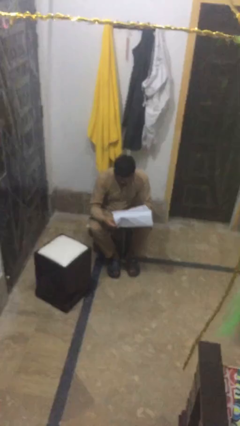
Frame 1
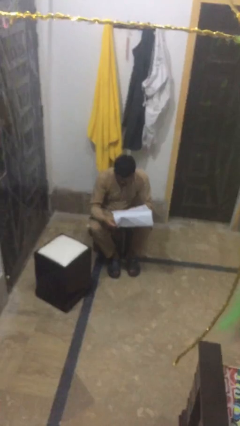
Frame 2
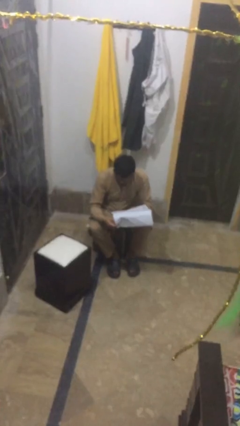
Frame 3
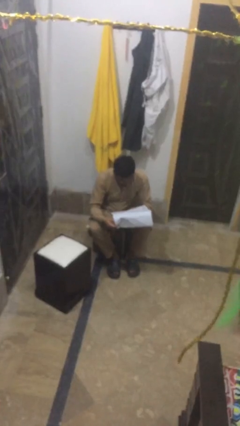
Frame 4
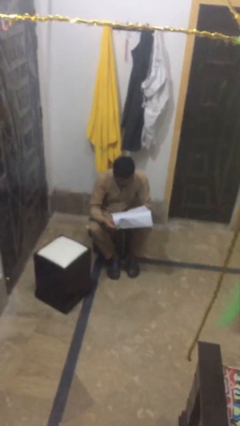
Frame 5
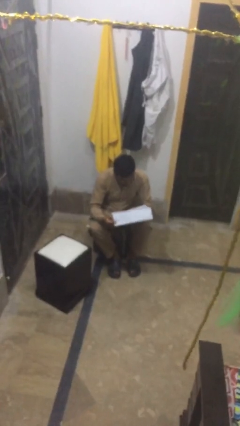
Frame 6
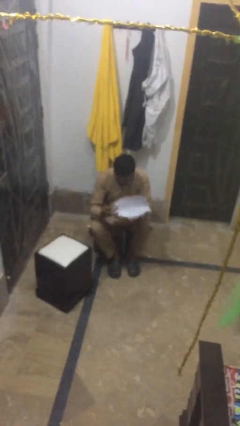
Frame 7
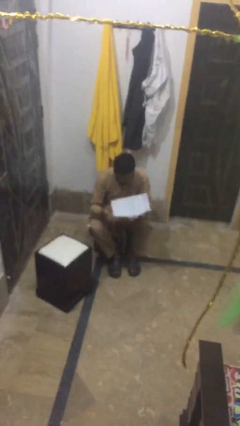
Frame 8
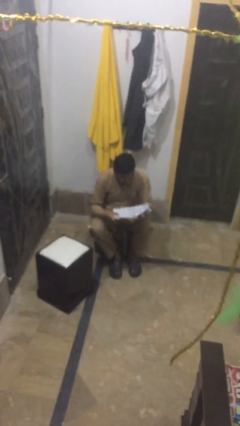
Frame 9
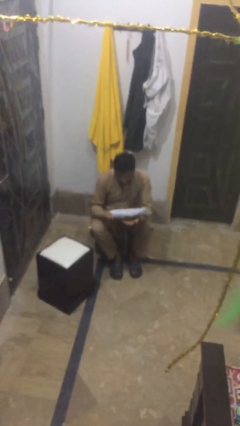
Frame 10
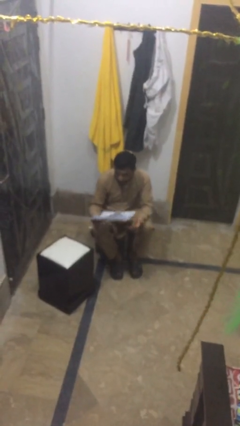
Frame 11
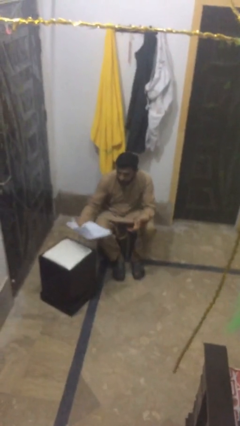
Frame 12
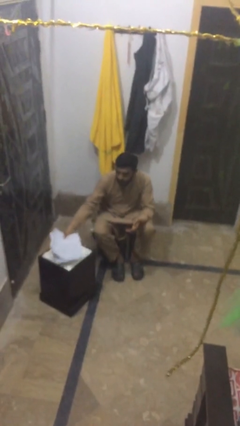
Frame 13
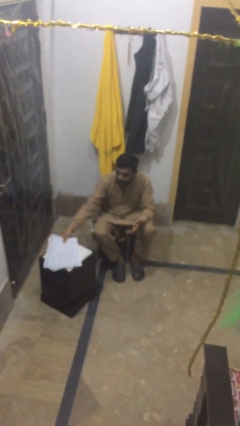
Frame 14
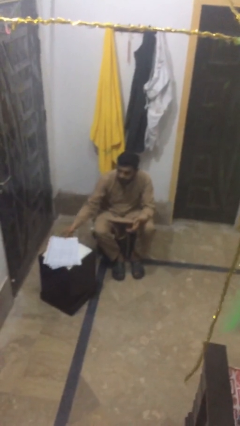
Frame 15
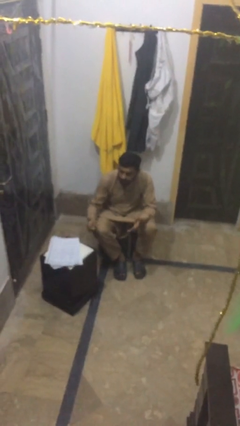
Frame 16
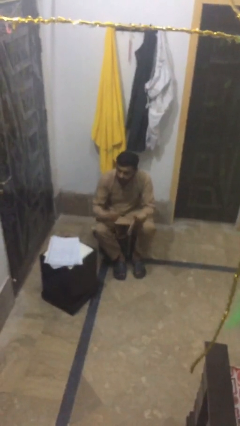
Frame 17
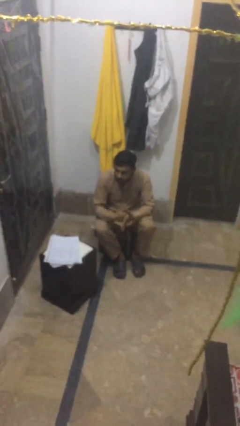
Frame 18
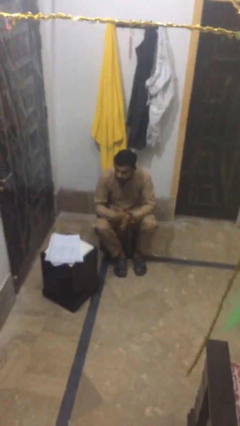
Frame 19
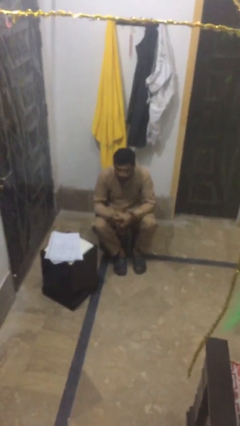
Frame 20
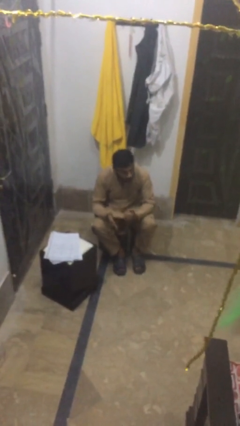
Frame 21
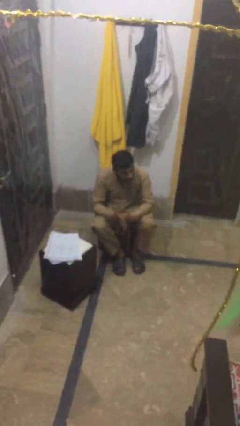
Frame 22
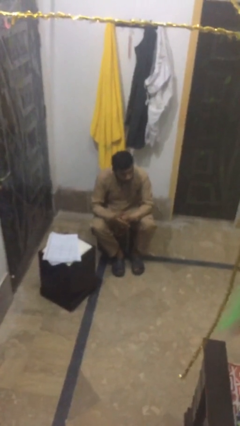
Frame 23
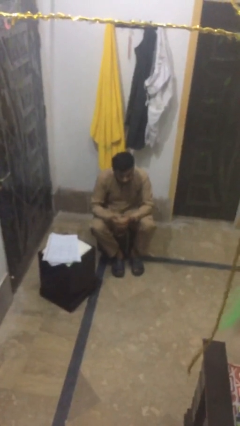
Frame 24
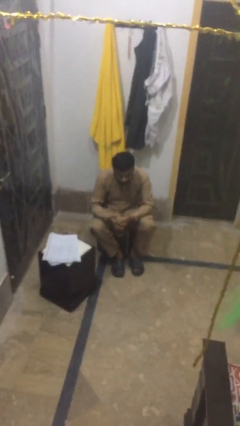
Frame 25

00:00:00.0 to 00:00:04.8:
person puts down object on table

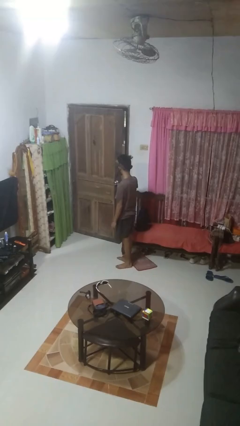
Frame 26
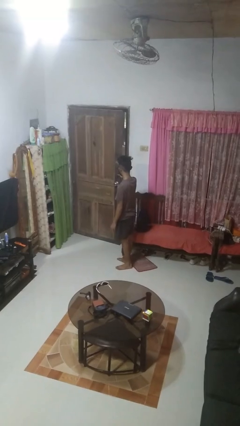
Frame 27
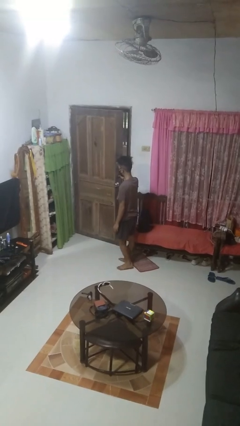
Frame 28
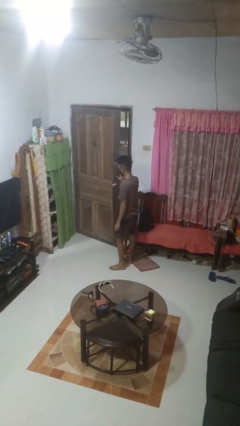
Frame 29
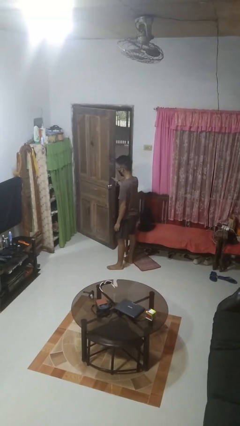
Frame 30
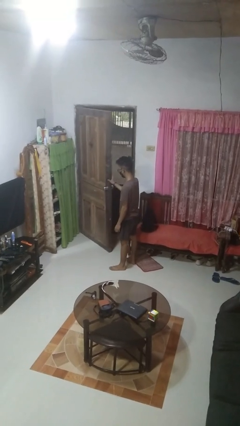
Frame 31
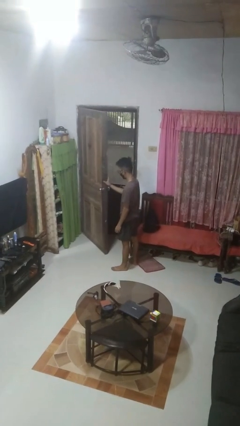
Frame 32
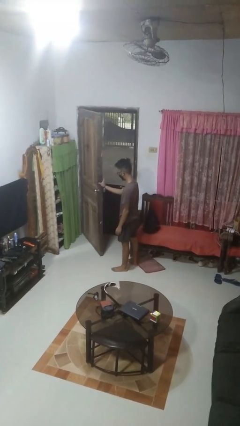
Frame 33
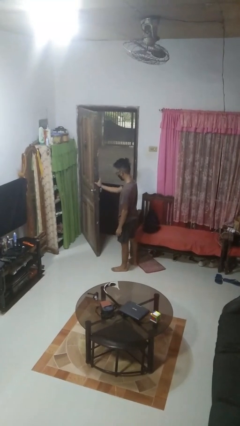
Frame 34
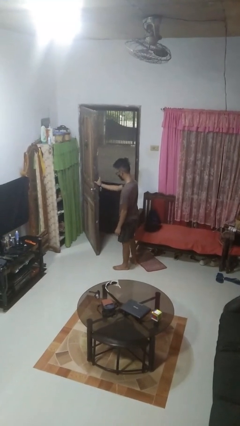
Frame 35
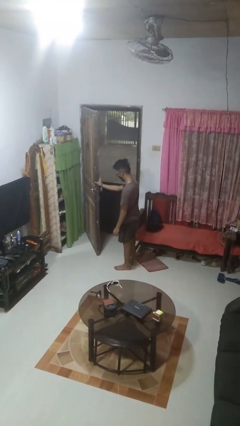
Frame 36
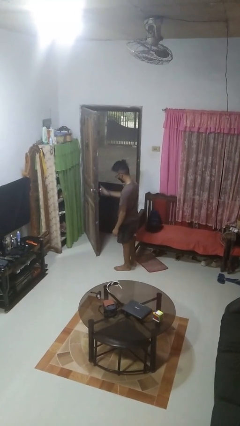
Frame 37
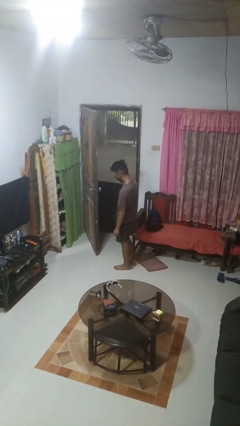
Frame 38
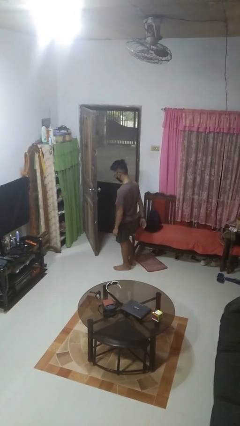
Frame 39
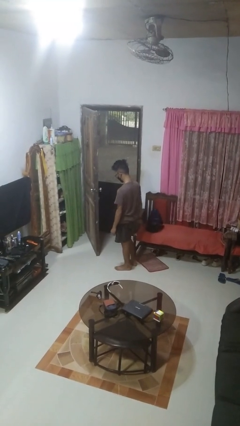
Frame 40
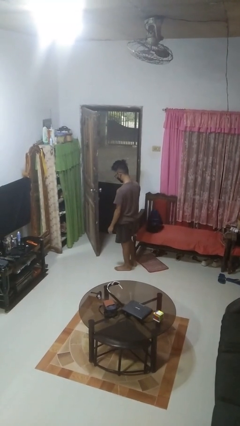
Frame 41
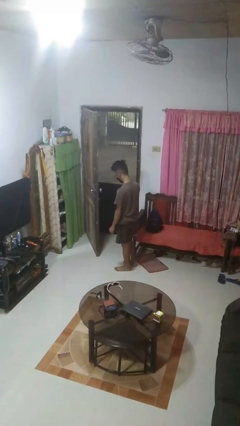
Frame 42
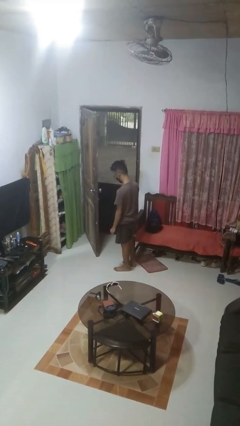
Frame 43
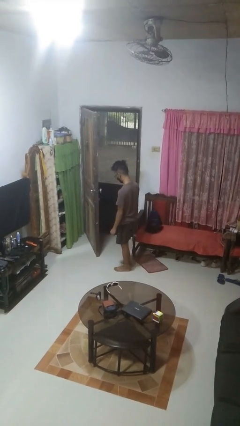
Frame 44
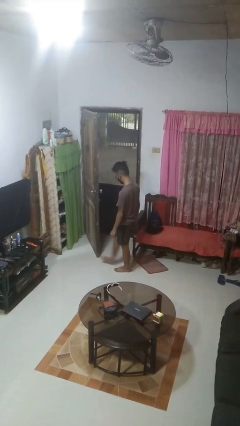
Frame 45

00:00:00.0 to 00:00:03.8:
person opens facility door

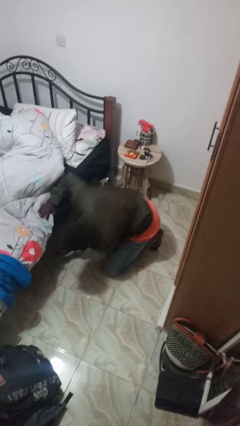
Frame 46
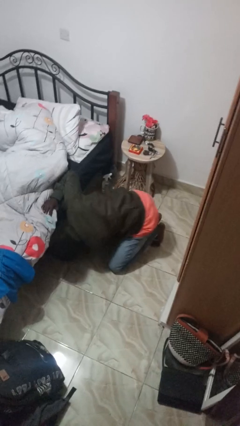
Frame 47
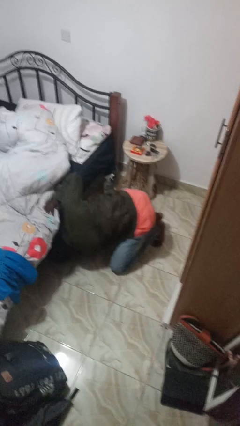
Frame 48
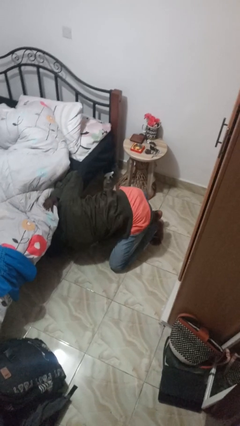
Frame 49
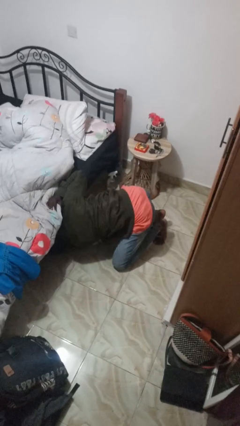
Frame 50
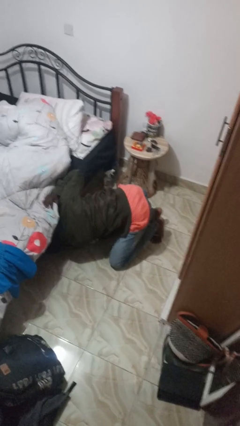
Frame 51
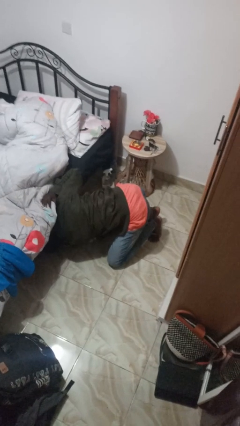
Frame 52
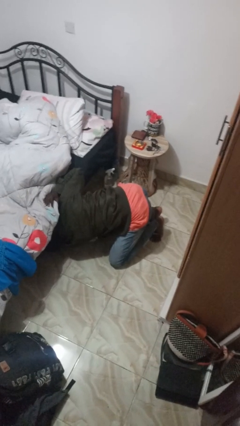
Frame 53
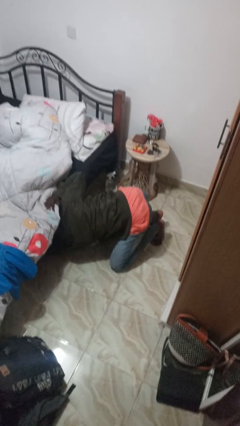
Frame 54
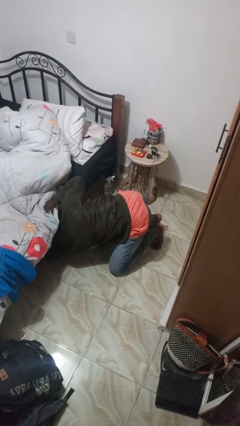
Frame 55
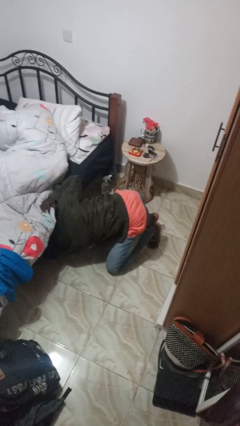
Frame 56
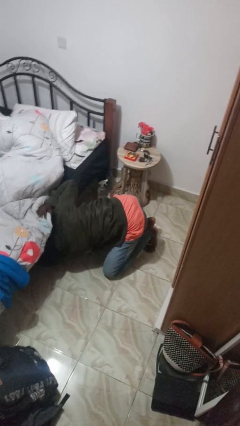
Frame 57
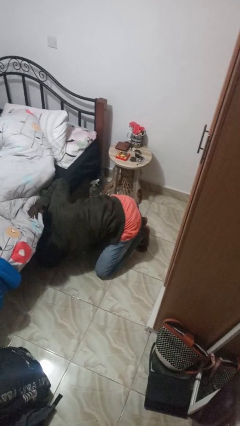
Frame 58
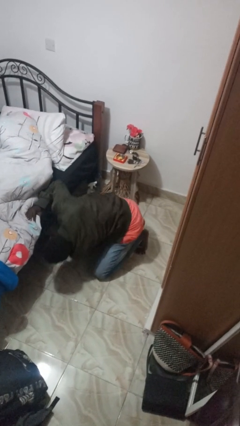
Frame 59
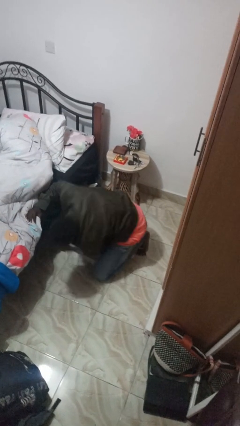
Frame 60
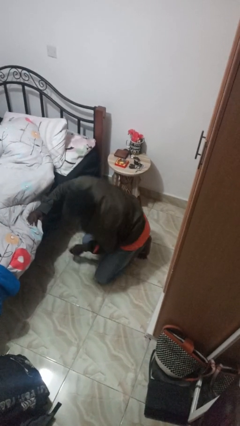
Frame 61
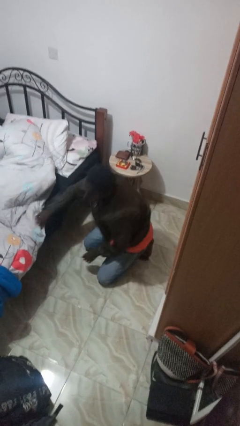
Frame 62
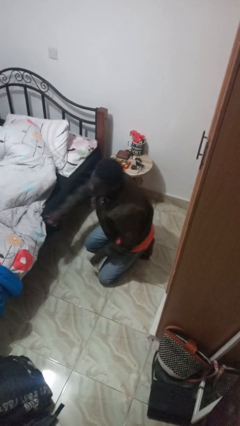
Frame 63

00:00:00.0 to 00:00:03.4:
person searches under bed

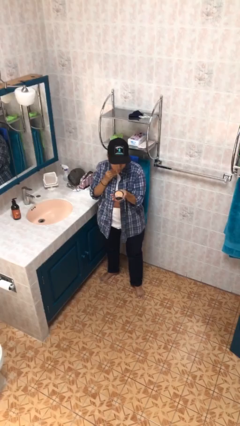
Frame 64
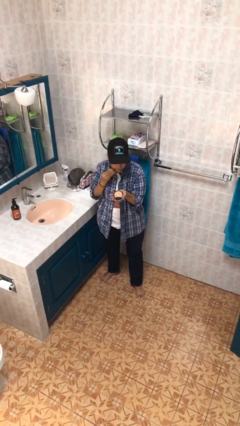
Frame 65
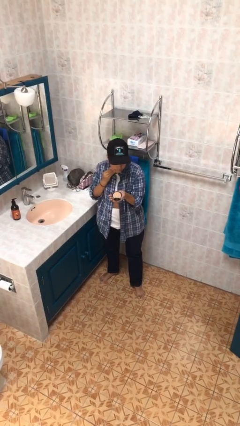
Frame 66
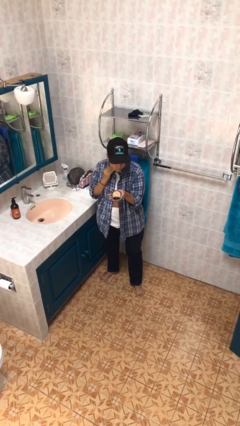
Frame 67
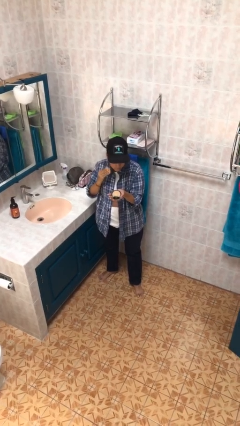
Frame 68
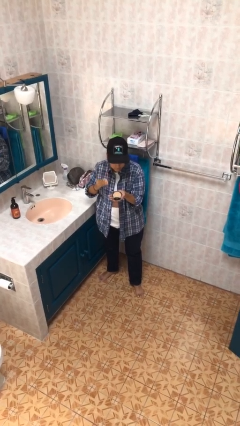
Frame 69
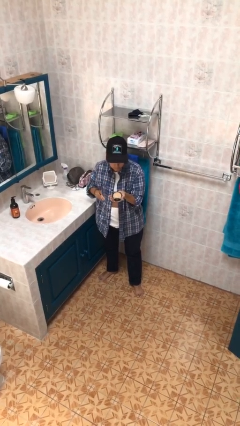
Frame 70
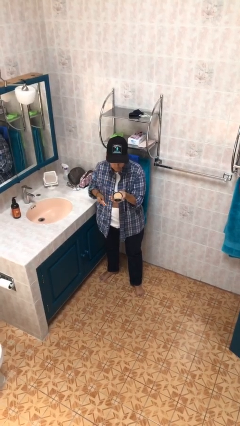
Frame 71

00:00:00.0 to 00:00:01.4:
person applies foundation makeup

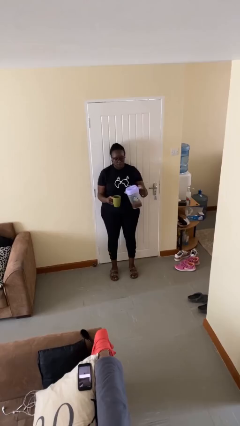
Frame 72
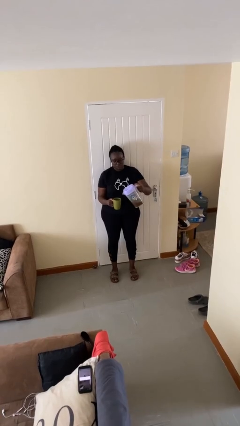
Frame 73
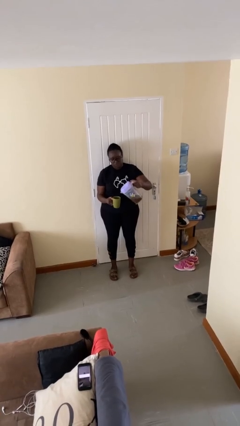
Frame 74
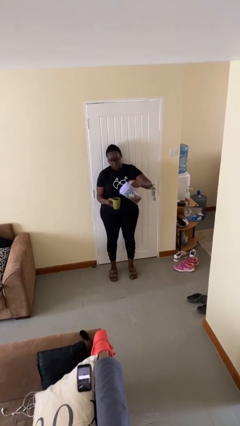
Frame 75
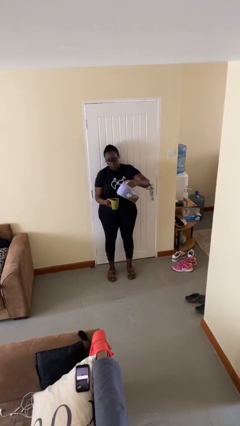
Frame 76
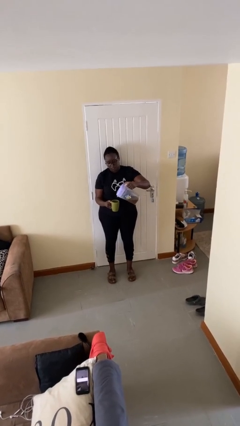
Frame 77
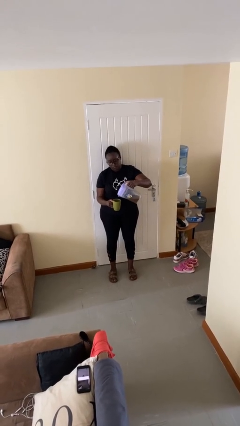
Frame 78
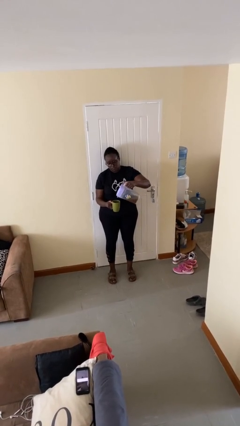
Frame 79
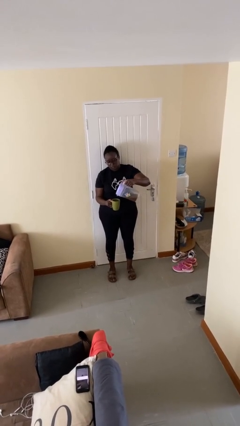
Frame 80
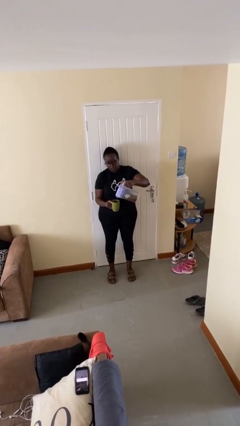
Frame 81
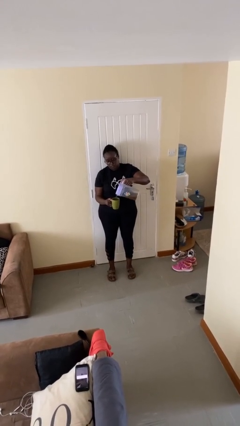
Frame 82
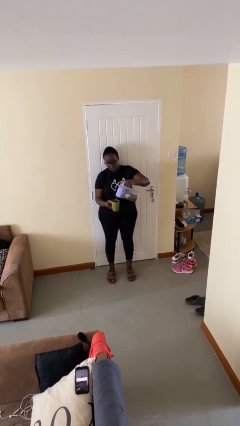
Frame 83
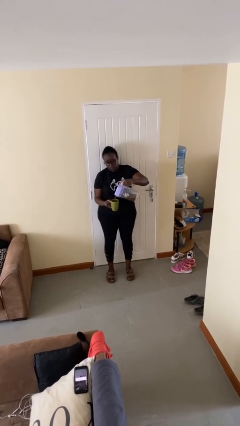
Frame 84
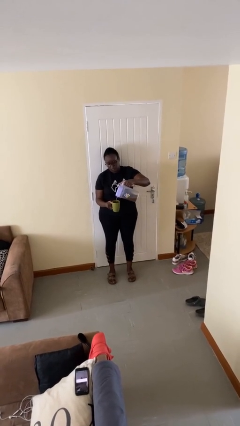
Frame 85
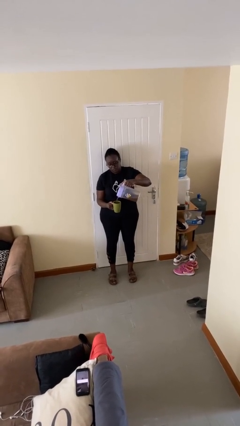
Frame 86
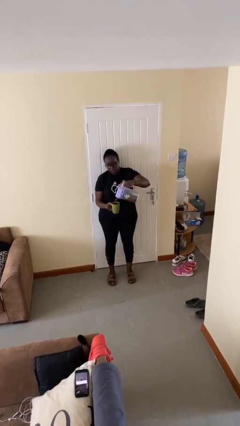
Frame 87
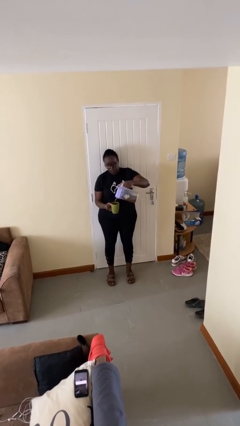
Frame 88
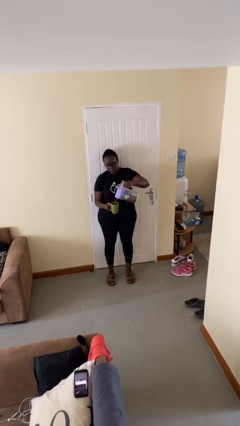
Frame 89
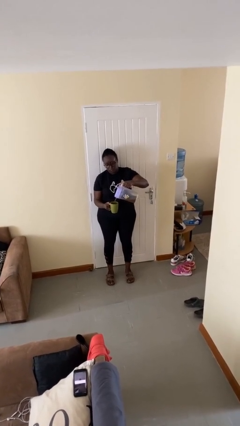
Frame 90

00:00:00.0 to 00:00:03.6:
person pours coffee into mug

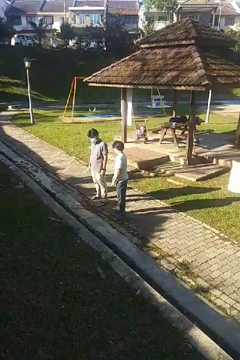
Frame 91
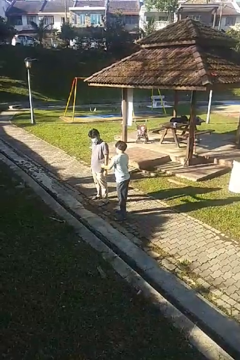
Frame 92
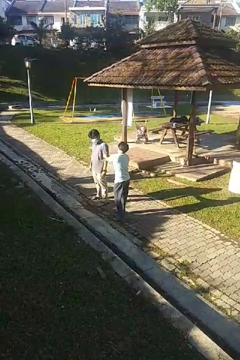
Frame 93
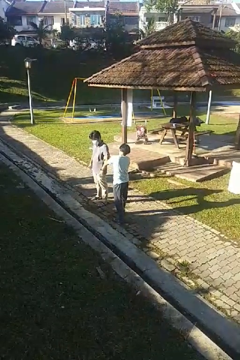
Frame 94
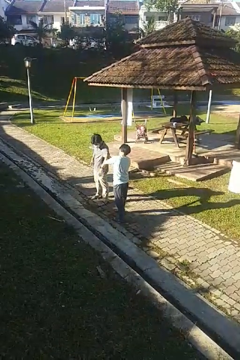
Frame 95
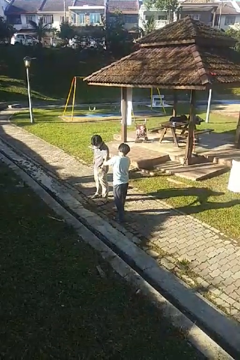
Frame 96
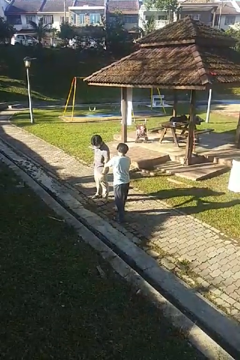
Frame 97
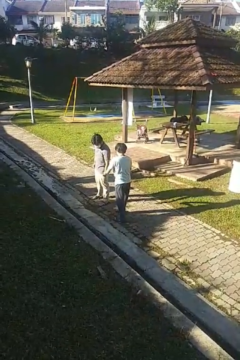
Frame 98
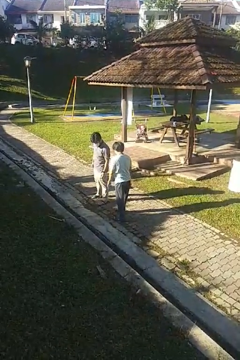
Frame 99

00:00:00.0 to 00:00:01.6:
person grabs person by bicep
